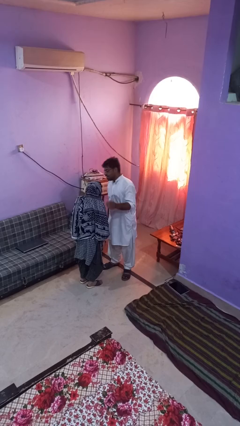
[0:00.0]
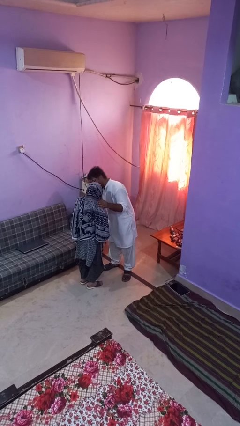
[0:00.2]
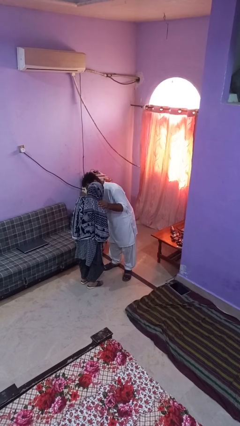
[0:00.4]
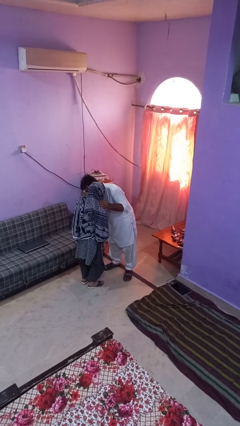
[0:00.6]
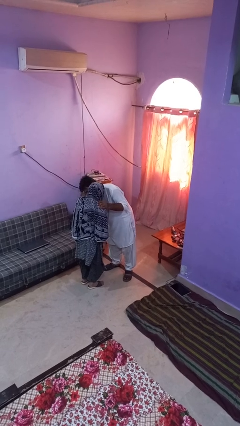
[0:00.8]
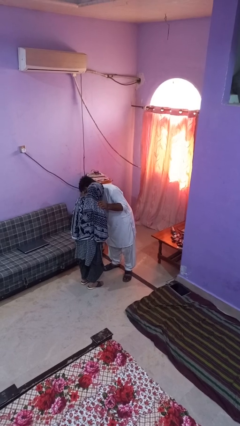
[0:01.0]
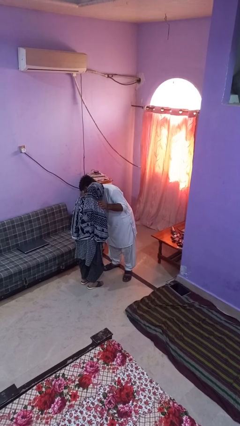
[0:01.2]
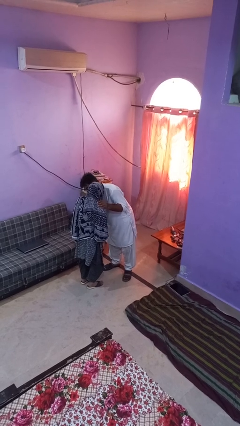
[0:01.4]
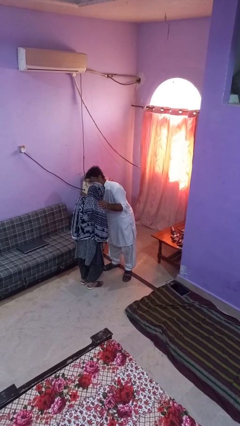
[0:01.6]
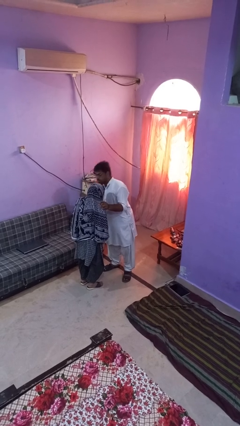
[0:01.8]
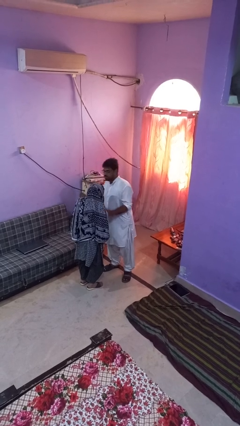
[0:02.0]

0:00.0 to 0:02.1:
person kisses cheek of person

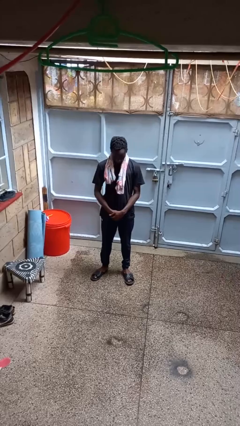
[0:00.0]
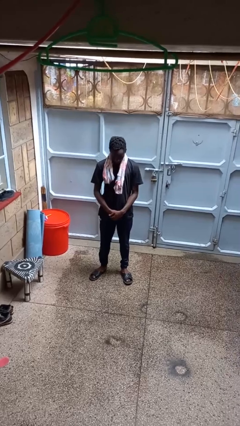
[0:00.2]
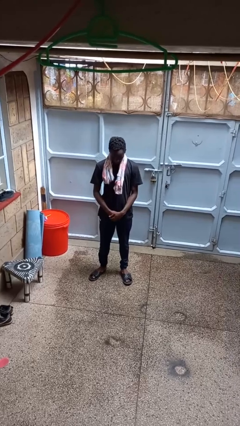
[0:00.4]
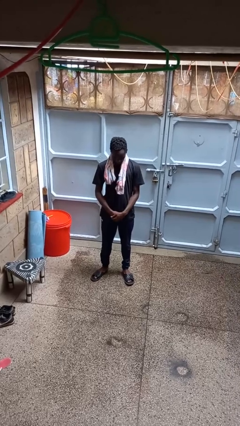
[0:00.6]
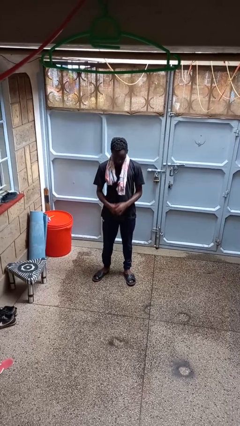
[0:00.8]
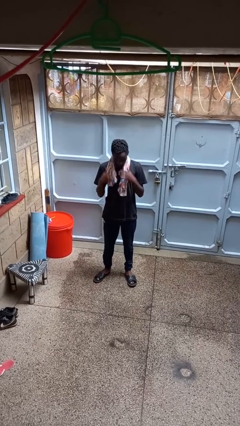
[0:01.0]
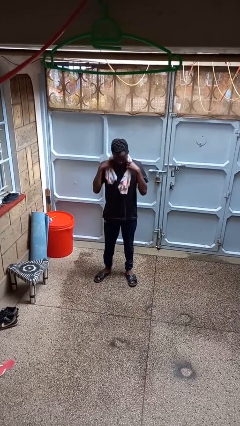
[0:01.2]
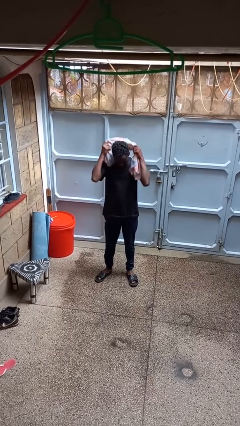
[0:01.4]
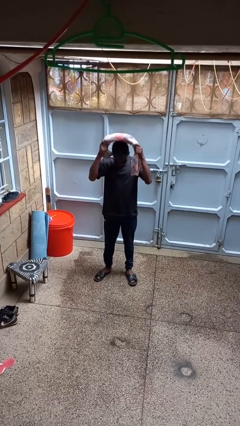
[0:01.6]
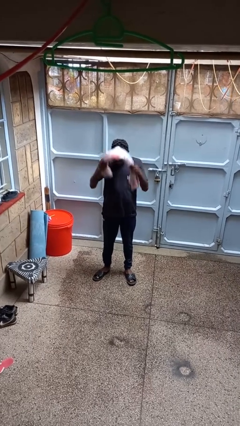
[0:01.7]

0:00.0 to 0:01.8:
person takes off scarf

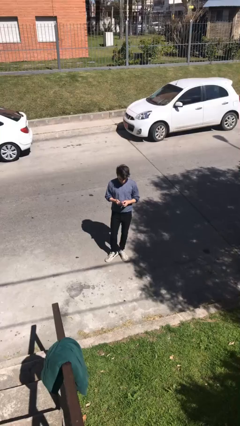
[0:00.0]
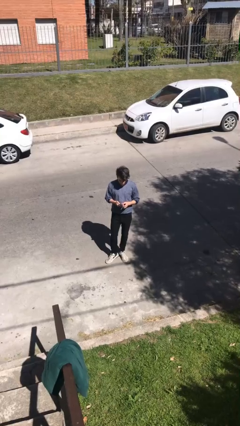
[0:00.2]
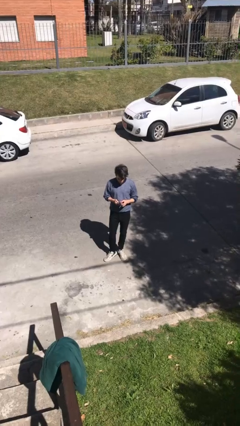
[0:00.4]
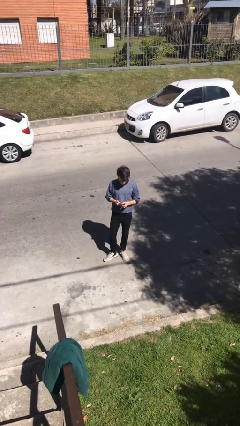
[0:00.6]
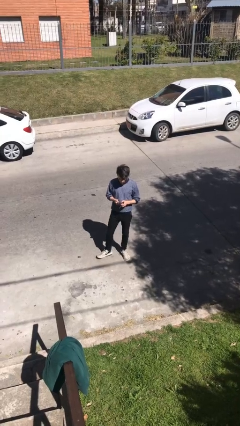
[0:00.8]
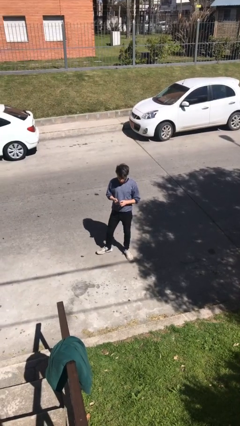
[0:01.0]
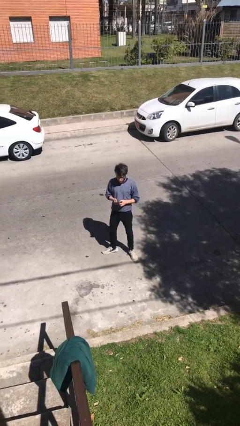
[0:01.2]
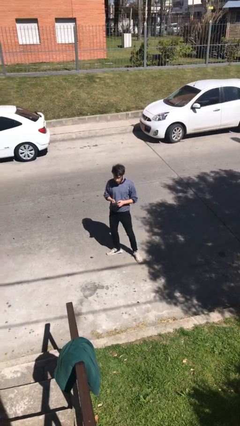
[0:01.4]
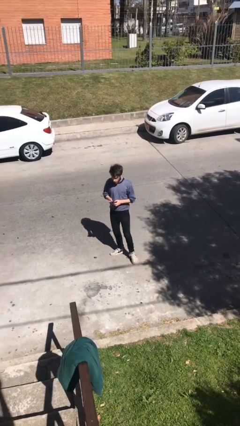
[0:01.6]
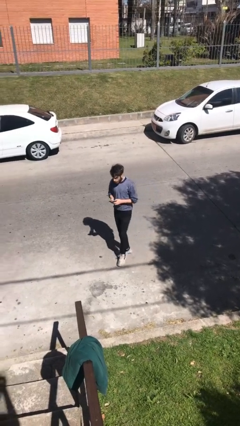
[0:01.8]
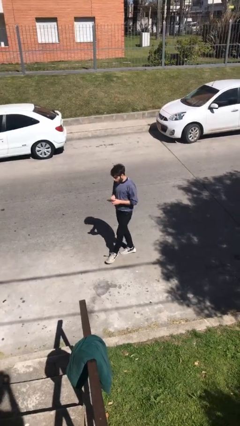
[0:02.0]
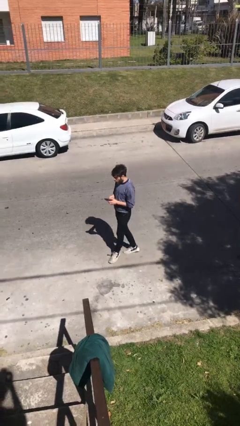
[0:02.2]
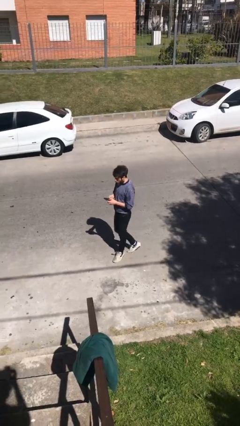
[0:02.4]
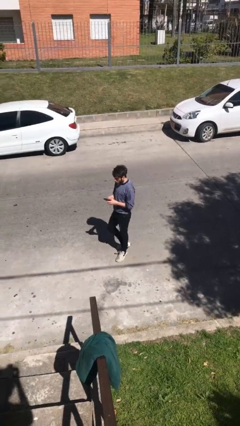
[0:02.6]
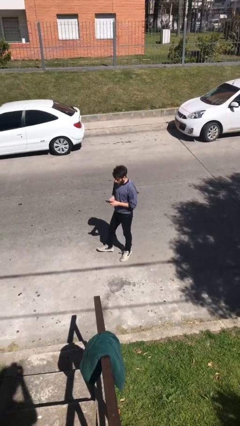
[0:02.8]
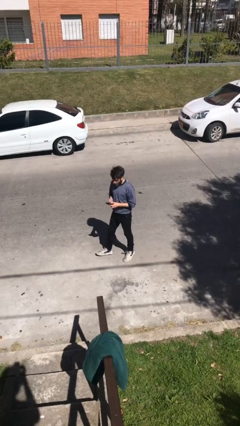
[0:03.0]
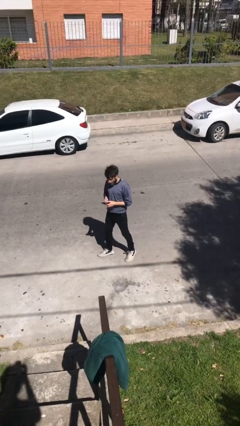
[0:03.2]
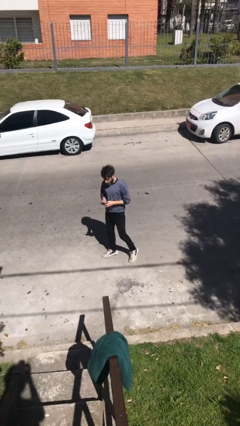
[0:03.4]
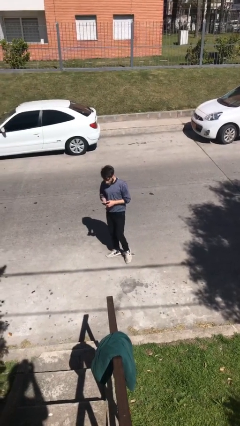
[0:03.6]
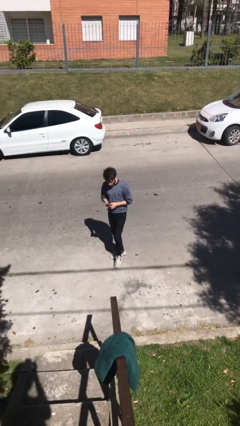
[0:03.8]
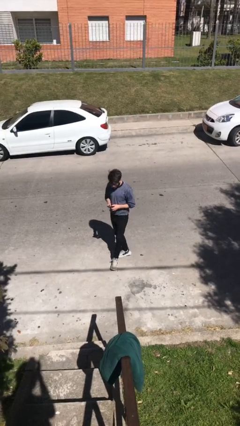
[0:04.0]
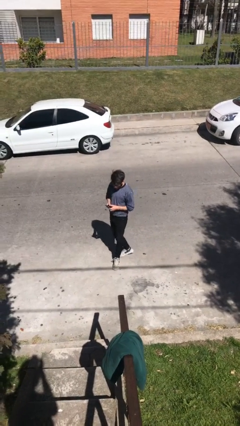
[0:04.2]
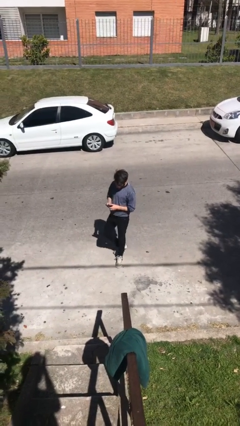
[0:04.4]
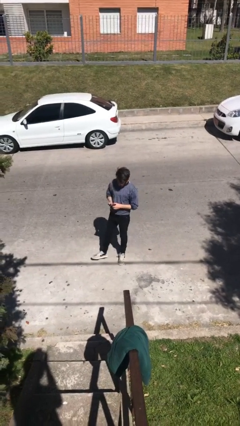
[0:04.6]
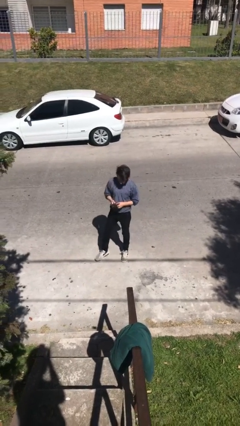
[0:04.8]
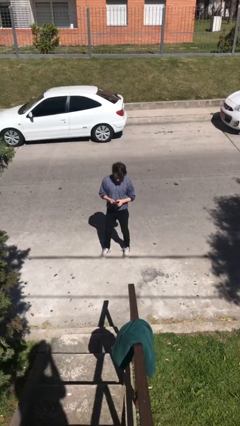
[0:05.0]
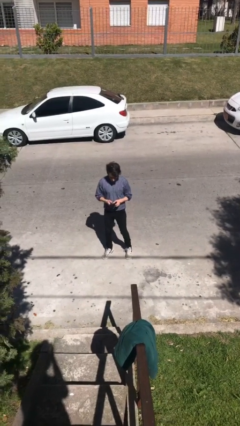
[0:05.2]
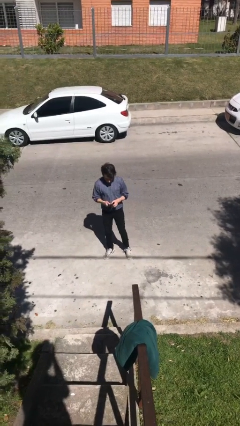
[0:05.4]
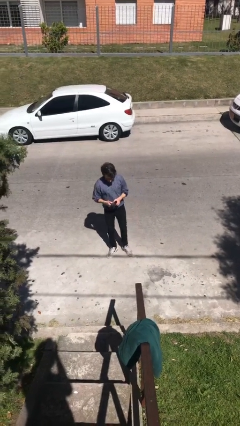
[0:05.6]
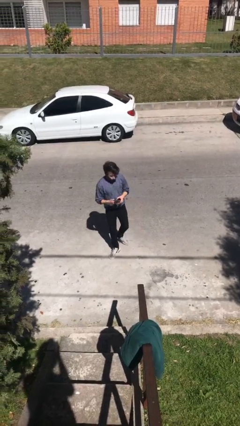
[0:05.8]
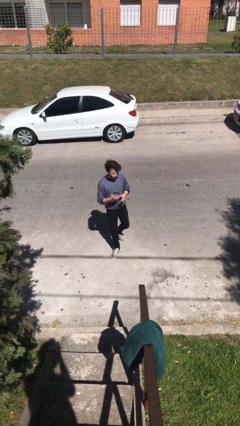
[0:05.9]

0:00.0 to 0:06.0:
person texts on phone

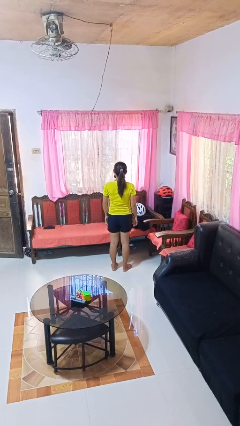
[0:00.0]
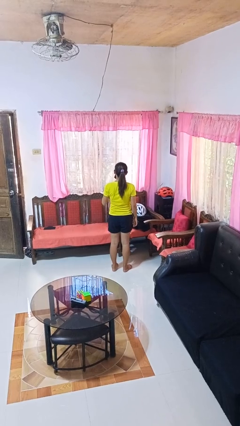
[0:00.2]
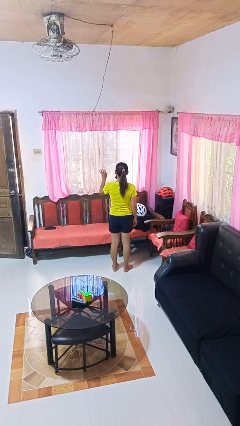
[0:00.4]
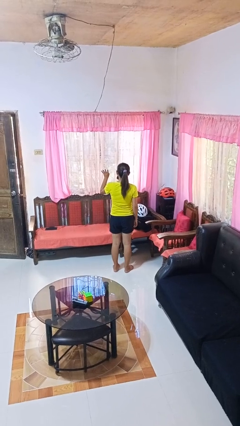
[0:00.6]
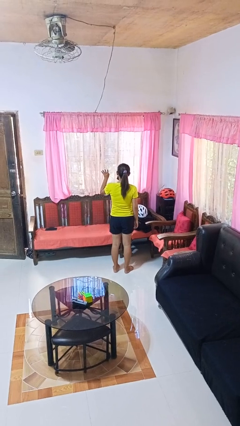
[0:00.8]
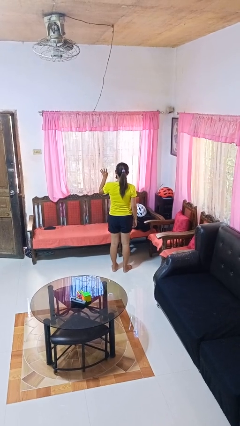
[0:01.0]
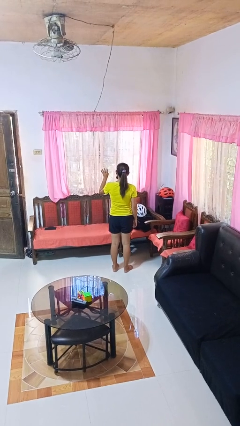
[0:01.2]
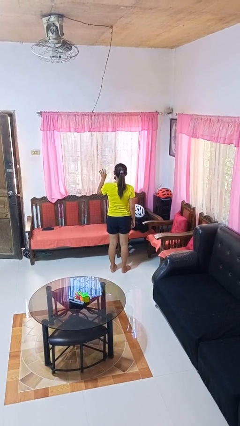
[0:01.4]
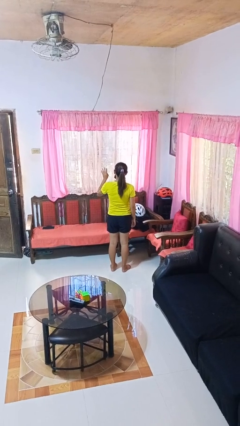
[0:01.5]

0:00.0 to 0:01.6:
person gestures number four

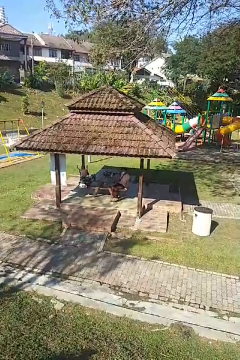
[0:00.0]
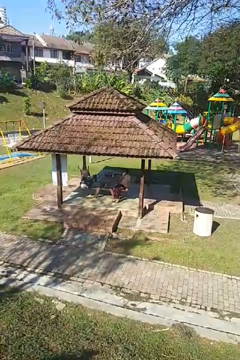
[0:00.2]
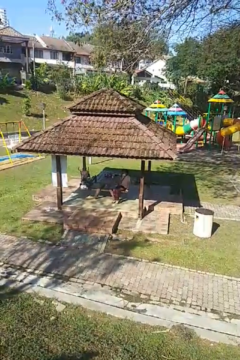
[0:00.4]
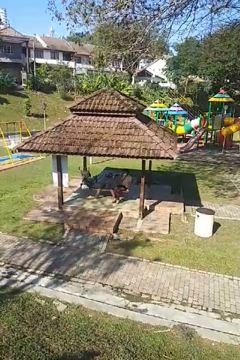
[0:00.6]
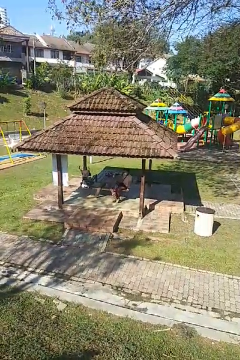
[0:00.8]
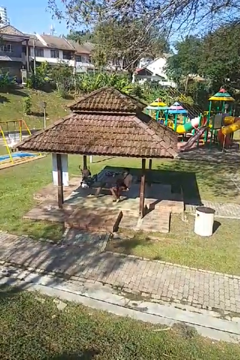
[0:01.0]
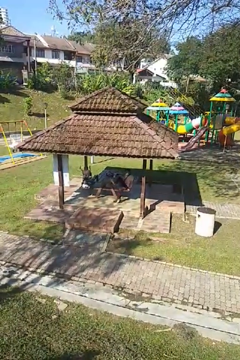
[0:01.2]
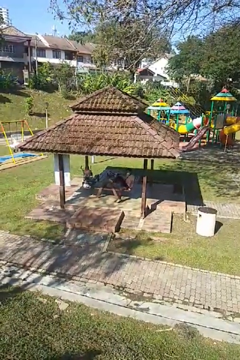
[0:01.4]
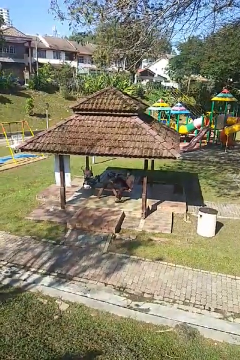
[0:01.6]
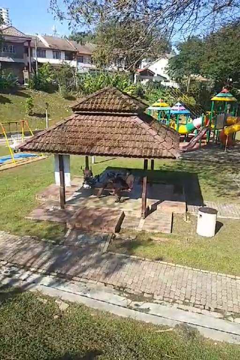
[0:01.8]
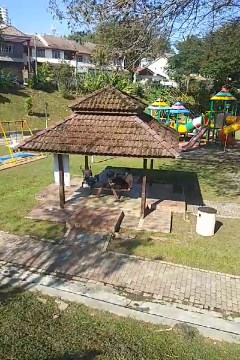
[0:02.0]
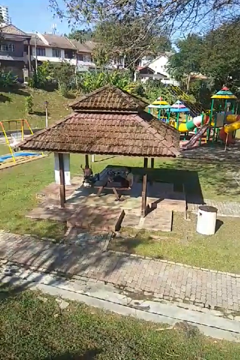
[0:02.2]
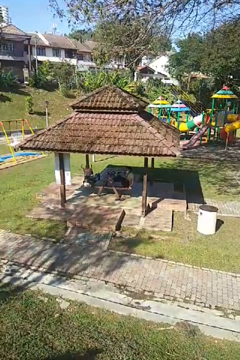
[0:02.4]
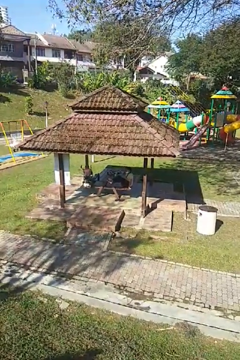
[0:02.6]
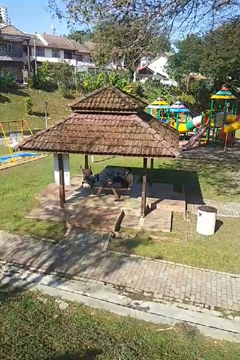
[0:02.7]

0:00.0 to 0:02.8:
person puts feet up

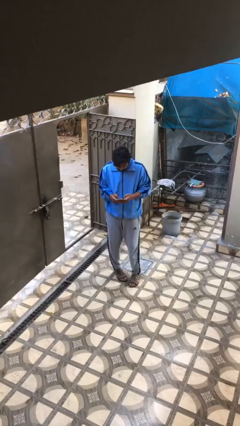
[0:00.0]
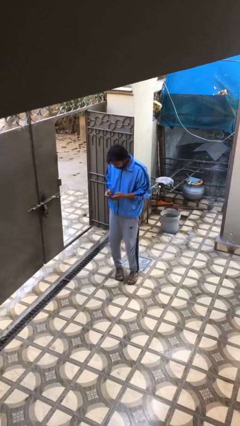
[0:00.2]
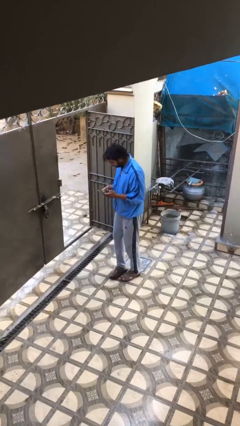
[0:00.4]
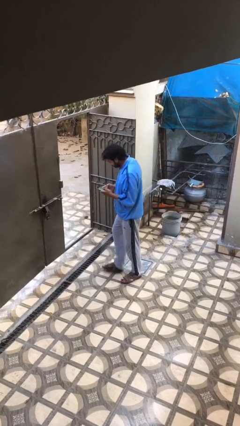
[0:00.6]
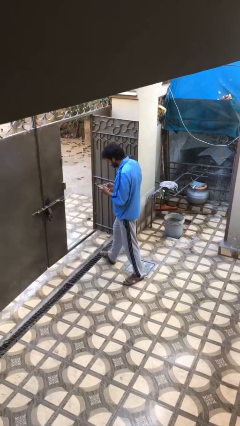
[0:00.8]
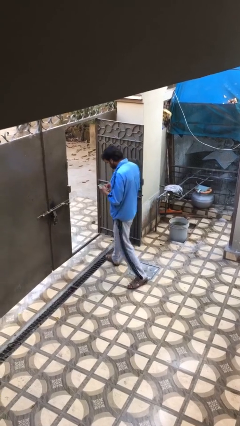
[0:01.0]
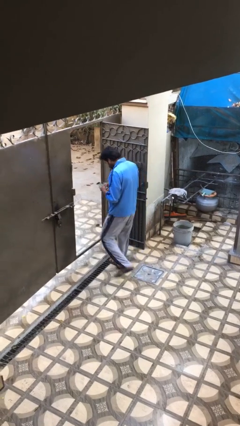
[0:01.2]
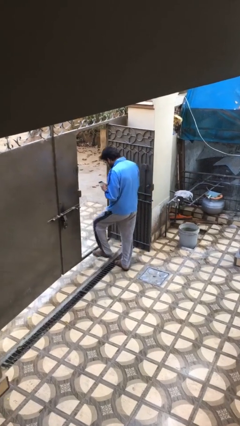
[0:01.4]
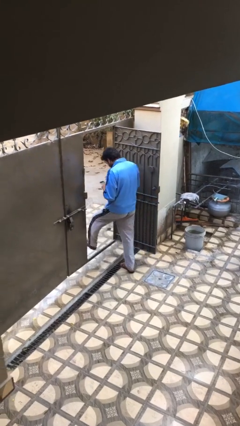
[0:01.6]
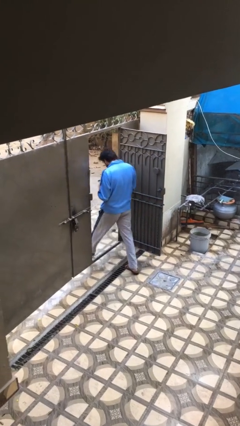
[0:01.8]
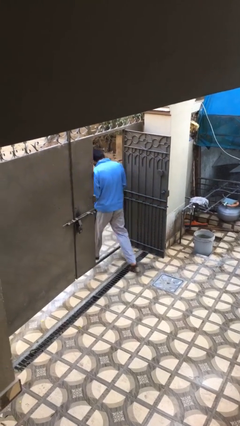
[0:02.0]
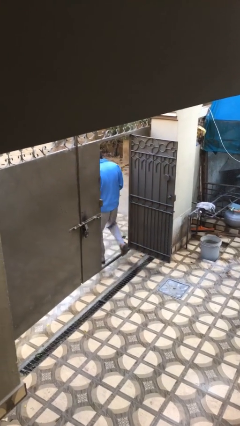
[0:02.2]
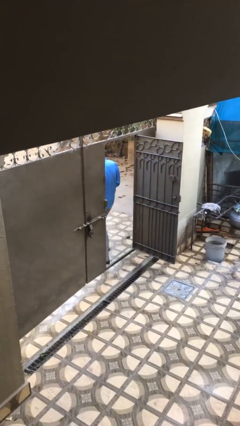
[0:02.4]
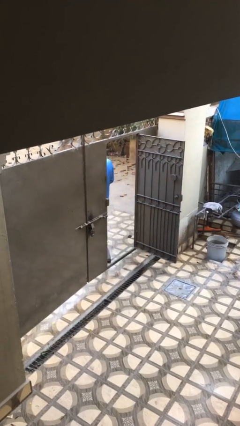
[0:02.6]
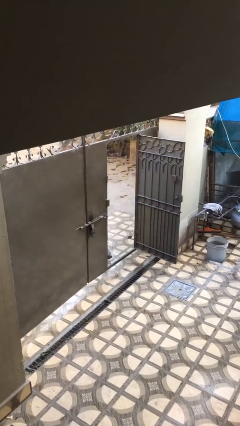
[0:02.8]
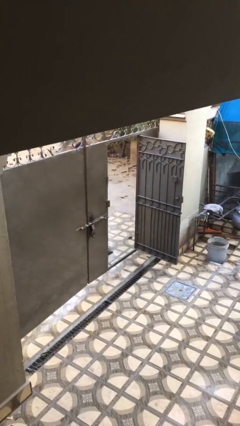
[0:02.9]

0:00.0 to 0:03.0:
person exits scene through structure
